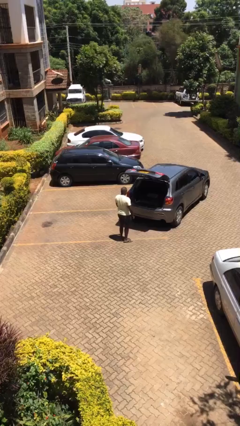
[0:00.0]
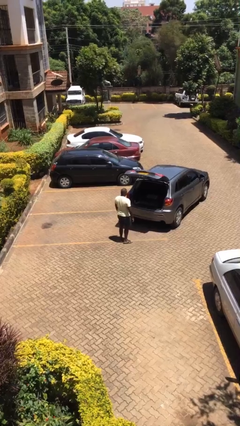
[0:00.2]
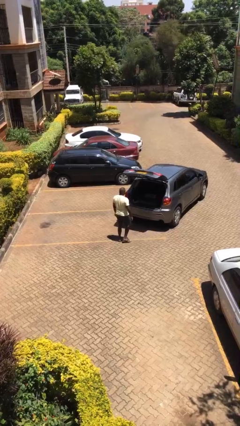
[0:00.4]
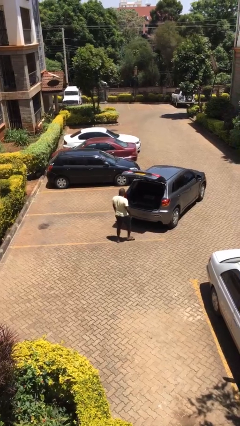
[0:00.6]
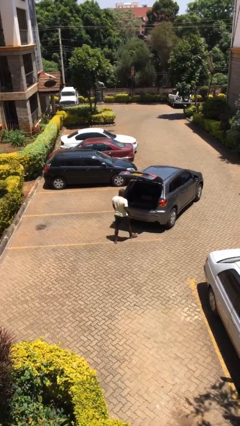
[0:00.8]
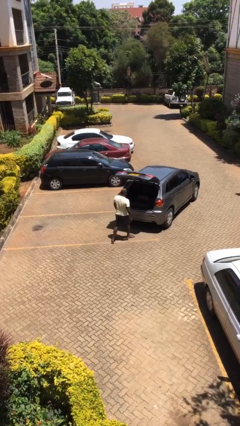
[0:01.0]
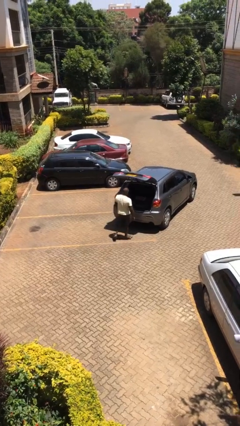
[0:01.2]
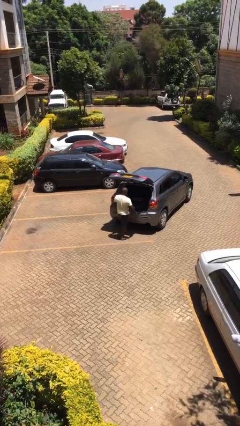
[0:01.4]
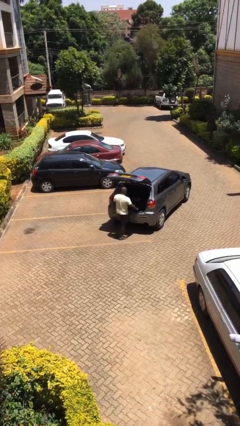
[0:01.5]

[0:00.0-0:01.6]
person unloads car

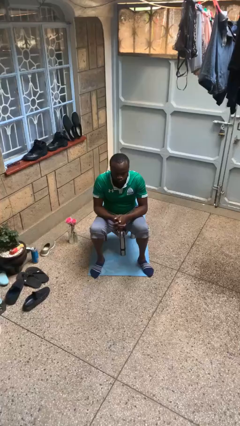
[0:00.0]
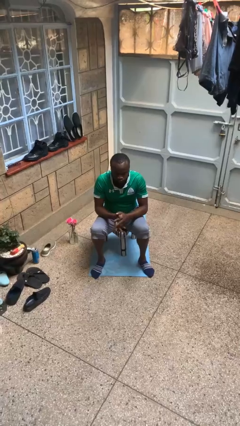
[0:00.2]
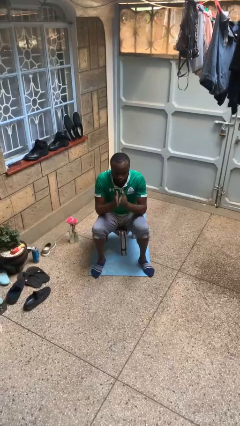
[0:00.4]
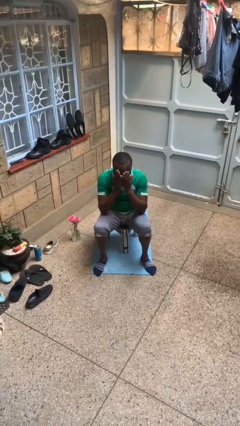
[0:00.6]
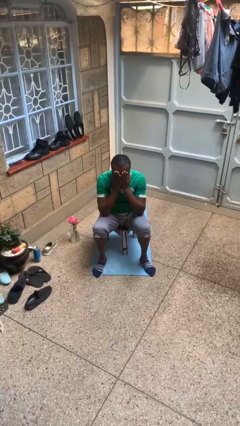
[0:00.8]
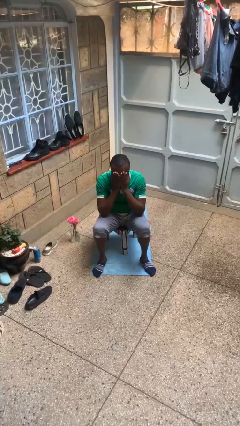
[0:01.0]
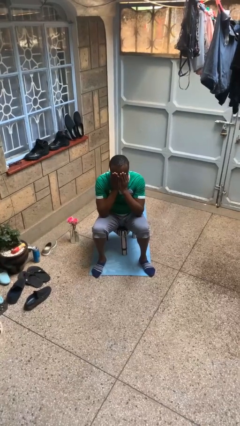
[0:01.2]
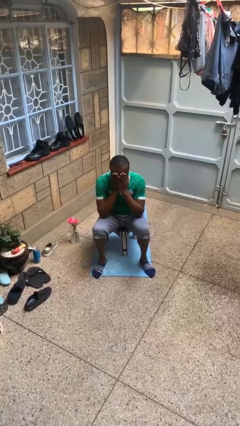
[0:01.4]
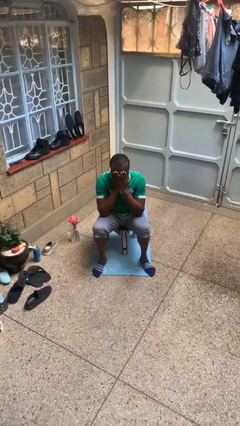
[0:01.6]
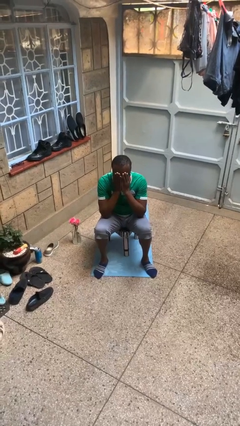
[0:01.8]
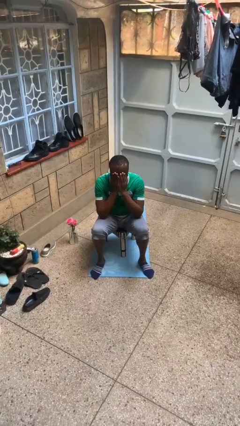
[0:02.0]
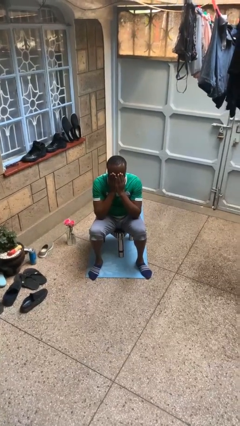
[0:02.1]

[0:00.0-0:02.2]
person covers face with hands

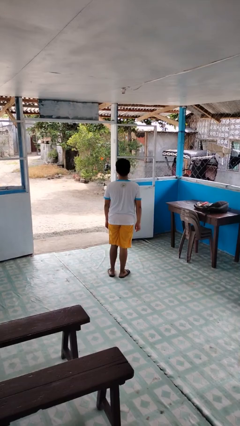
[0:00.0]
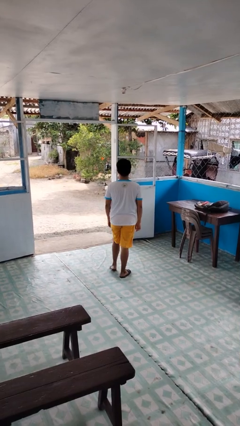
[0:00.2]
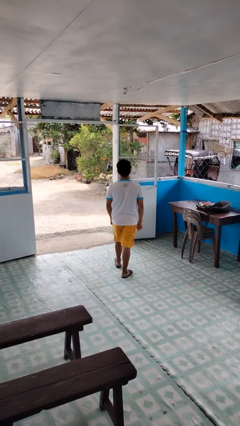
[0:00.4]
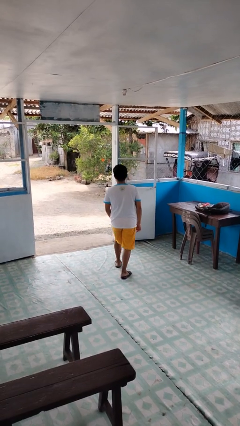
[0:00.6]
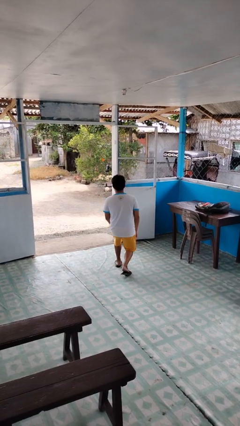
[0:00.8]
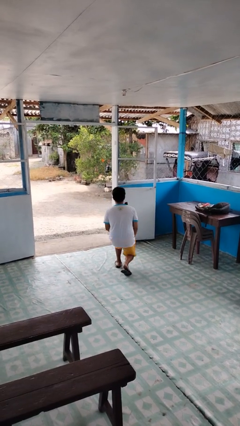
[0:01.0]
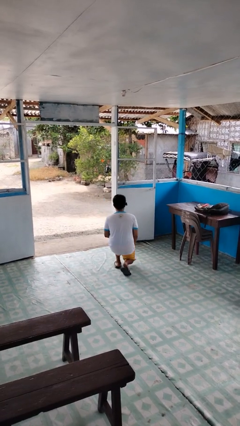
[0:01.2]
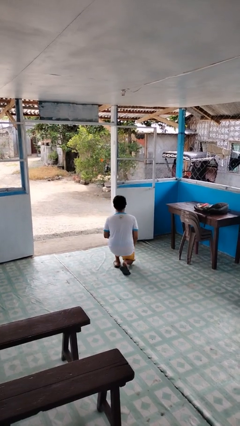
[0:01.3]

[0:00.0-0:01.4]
person kneels

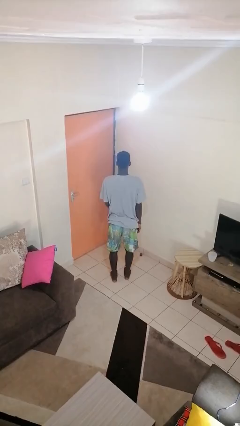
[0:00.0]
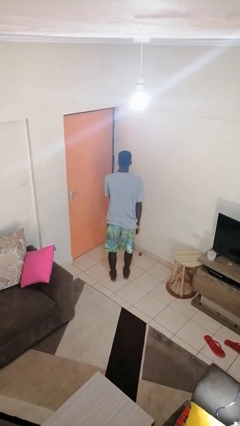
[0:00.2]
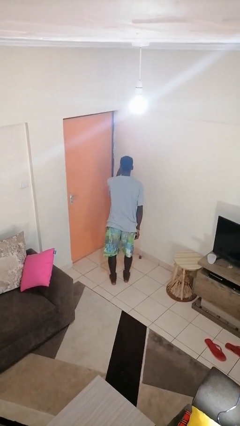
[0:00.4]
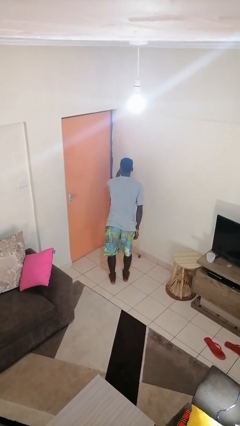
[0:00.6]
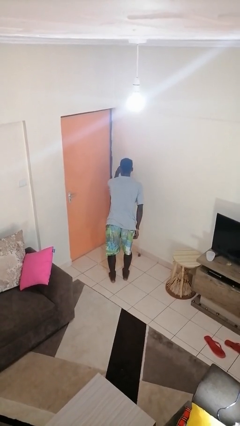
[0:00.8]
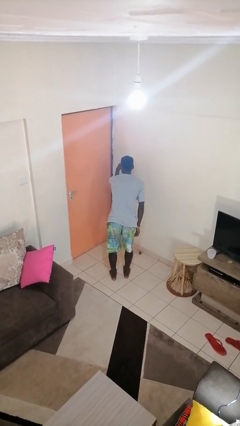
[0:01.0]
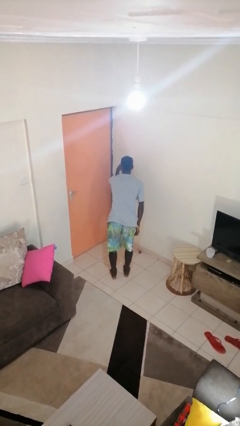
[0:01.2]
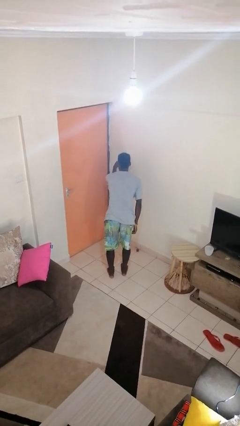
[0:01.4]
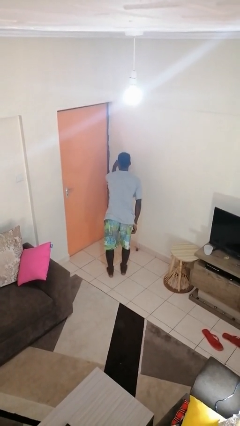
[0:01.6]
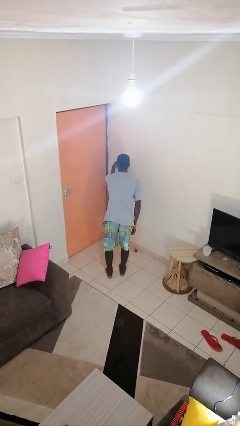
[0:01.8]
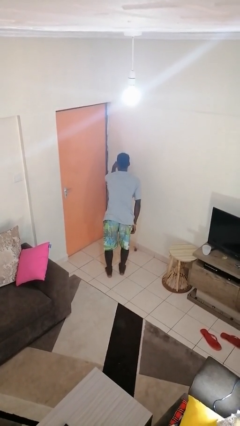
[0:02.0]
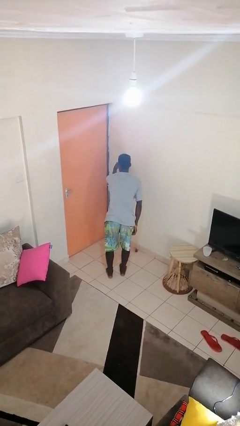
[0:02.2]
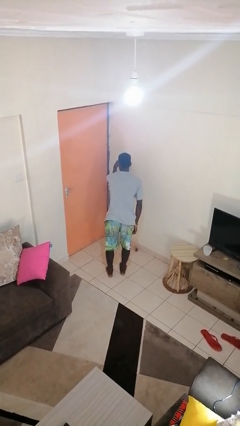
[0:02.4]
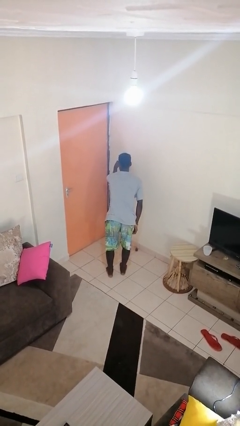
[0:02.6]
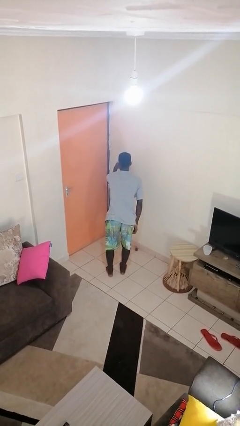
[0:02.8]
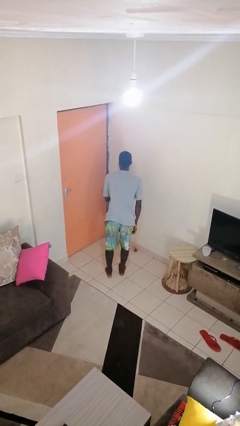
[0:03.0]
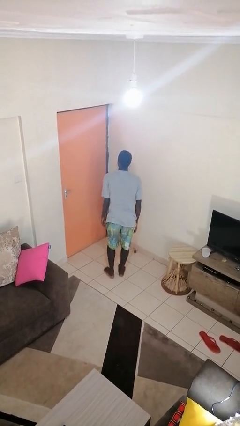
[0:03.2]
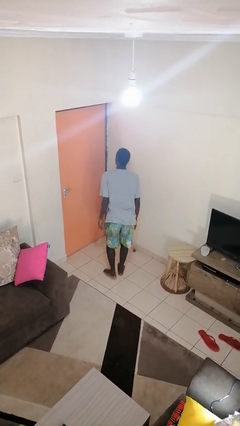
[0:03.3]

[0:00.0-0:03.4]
person gestures watch closely

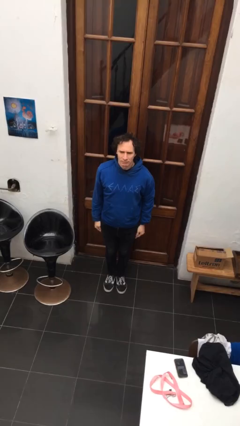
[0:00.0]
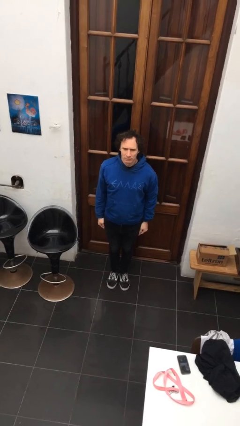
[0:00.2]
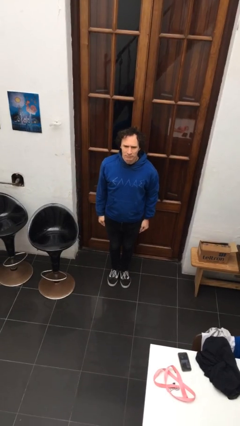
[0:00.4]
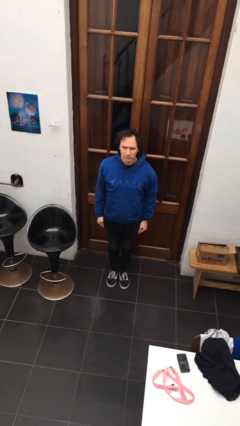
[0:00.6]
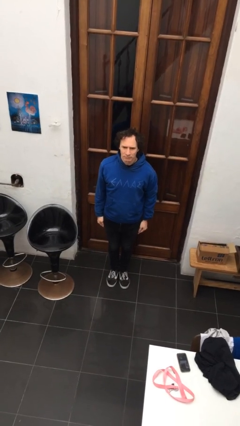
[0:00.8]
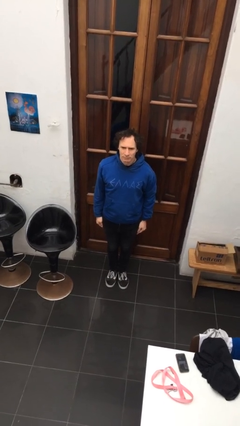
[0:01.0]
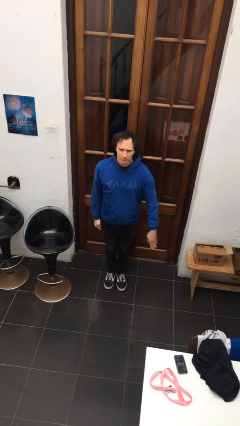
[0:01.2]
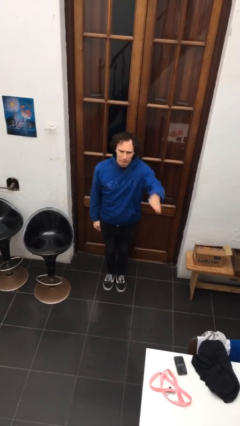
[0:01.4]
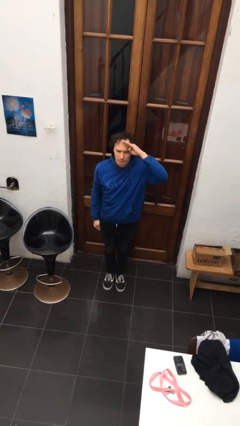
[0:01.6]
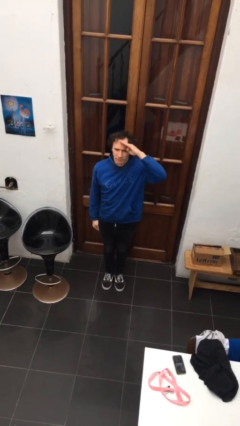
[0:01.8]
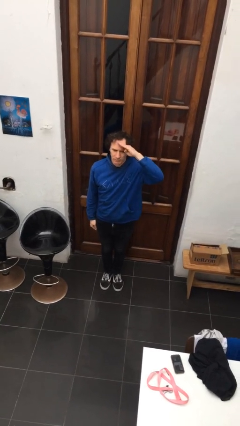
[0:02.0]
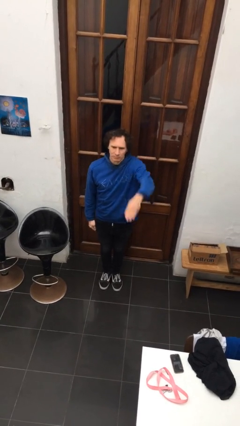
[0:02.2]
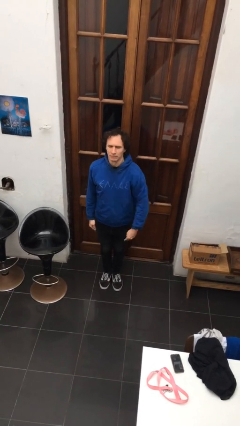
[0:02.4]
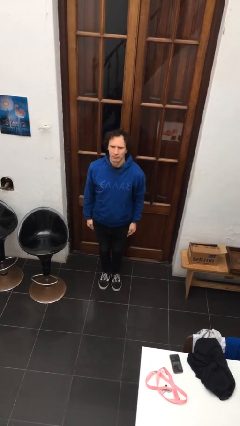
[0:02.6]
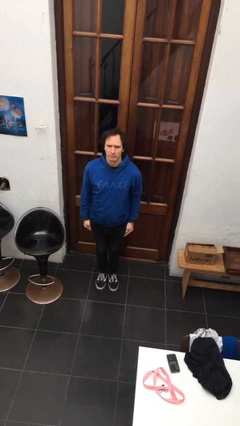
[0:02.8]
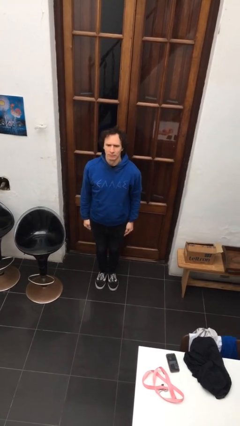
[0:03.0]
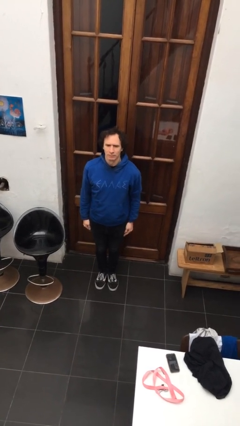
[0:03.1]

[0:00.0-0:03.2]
person salutes

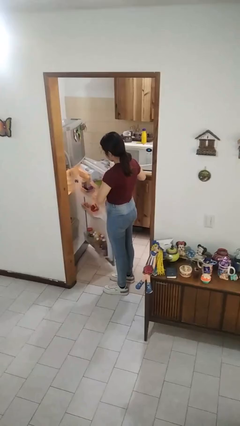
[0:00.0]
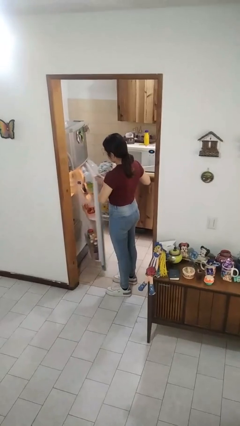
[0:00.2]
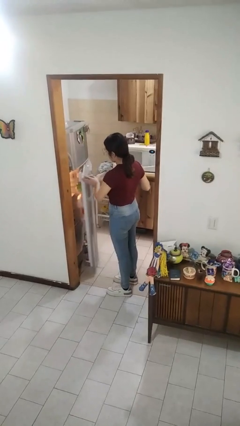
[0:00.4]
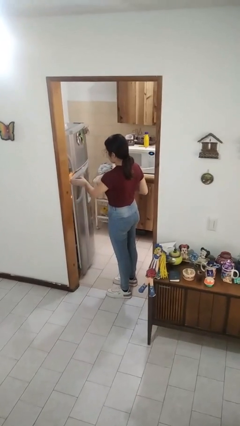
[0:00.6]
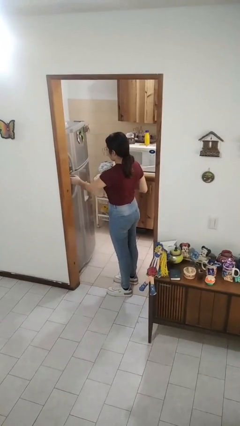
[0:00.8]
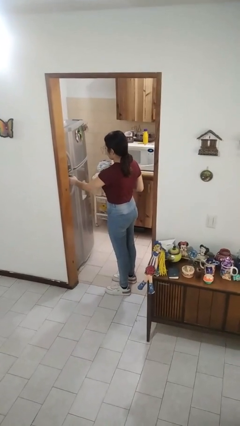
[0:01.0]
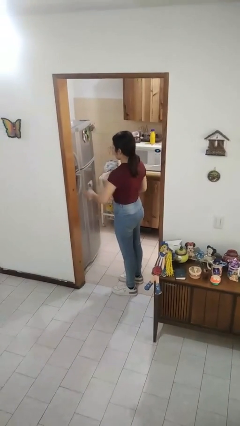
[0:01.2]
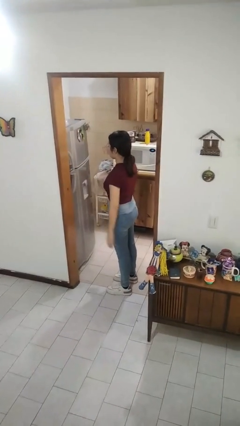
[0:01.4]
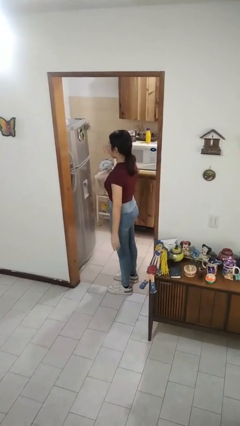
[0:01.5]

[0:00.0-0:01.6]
person closes refrigerator

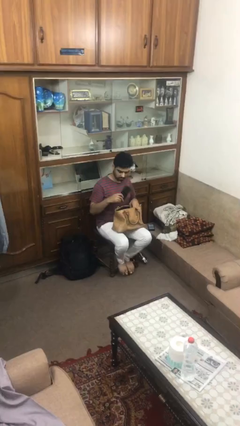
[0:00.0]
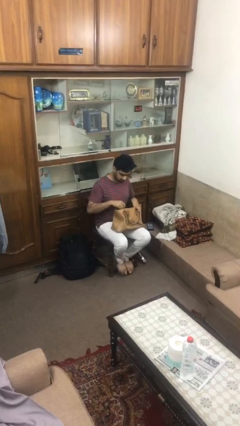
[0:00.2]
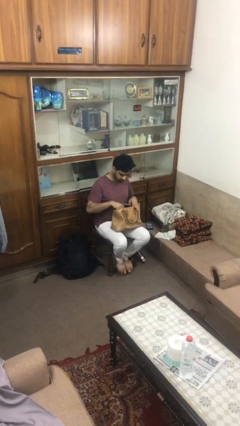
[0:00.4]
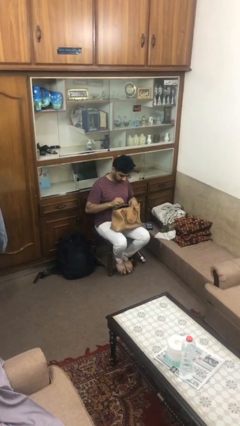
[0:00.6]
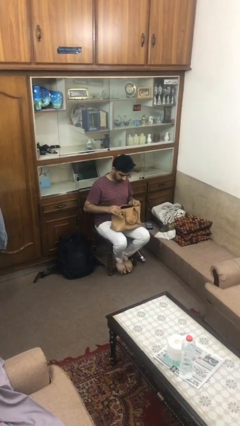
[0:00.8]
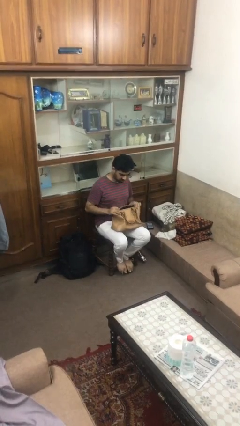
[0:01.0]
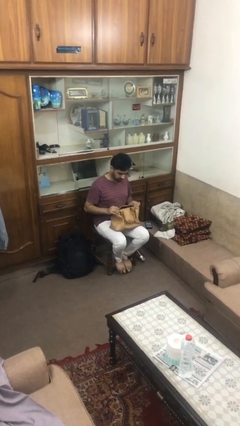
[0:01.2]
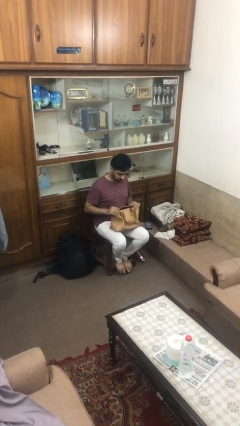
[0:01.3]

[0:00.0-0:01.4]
person puts object into purse

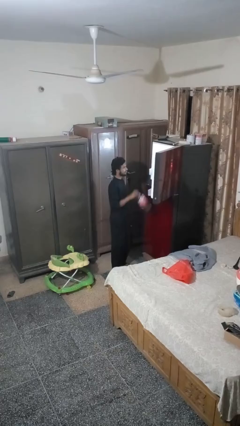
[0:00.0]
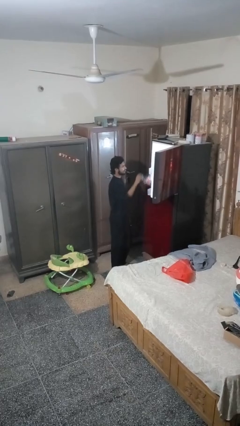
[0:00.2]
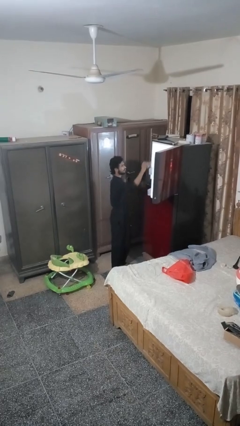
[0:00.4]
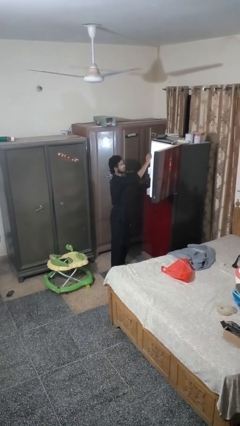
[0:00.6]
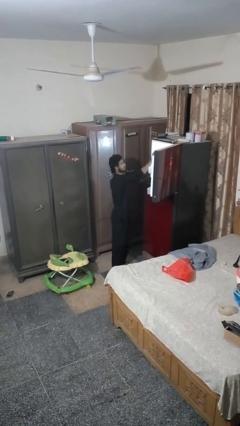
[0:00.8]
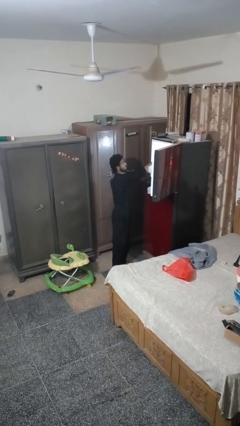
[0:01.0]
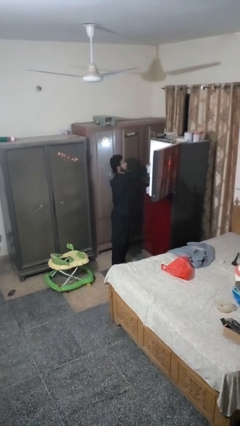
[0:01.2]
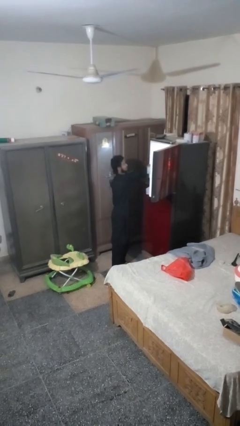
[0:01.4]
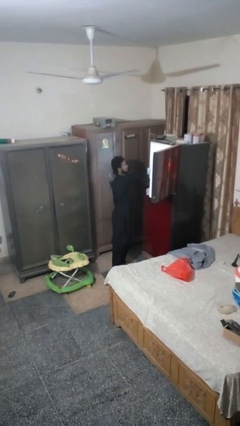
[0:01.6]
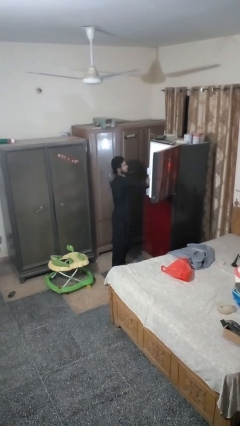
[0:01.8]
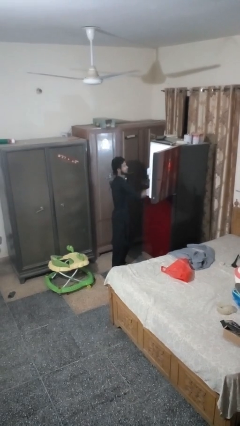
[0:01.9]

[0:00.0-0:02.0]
person puts object into refrigerator

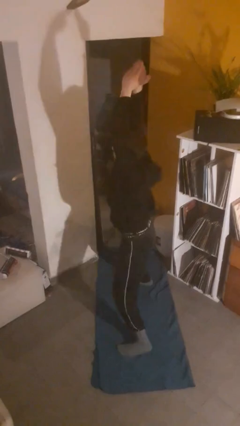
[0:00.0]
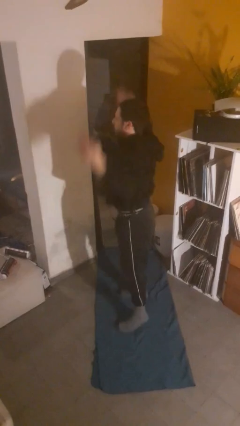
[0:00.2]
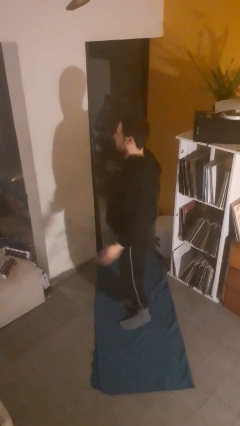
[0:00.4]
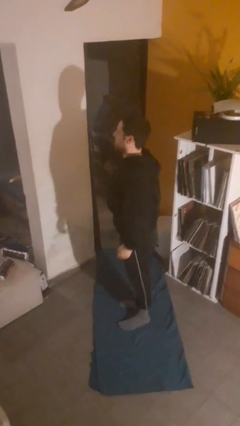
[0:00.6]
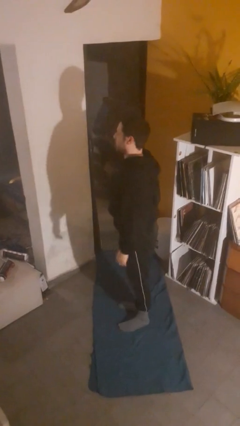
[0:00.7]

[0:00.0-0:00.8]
person exercises with jumping jacks
